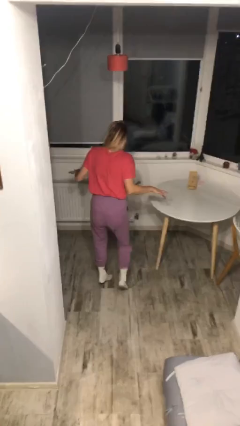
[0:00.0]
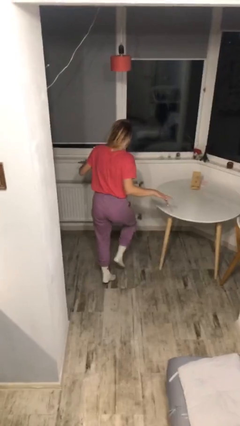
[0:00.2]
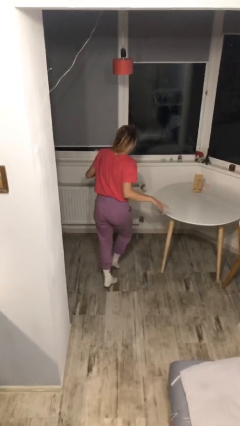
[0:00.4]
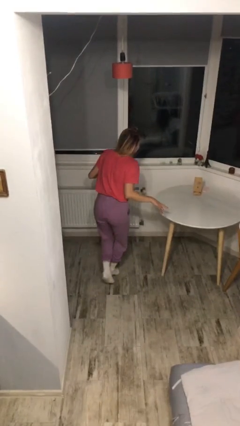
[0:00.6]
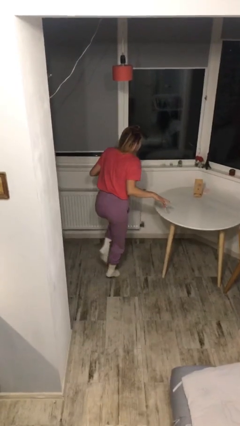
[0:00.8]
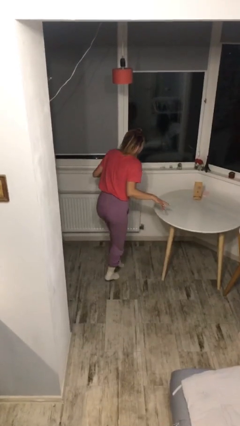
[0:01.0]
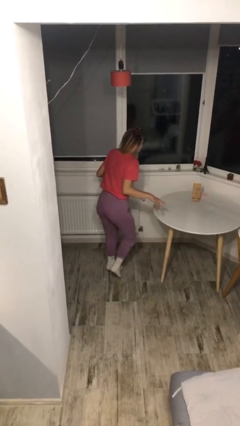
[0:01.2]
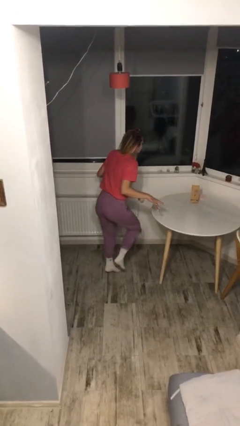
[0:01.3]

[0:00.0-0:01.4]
person walks tiptoe

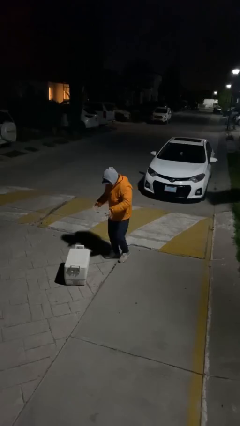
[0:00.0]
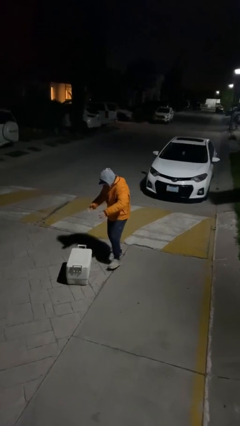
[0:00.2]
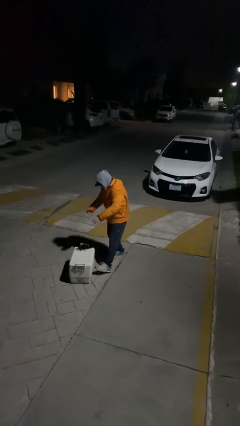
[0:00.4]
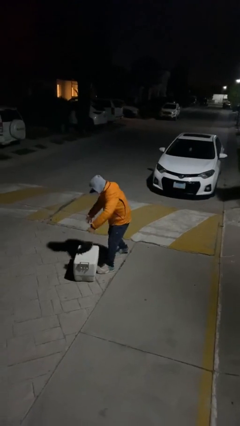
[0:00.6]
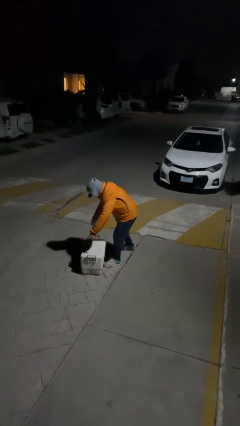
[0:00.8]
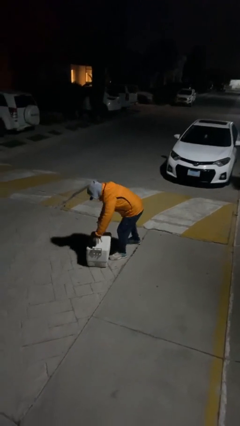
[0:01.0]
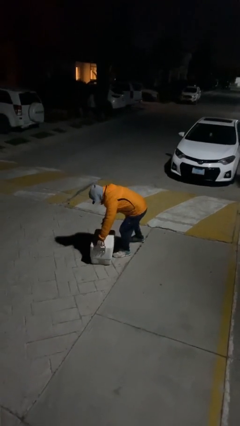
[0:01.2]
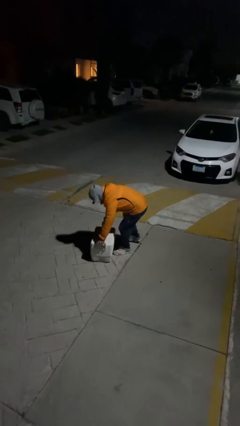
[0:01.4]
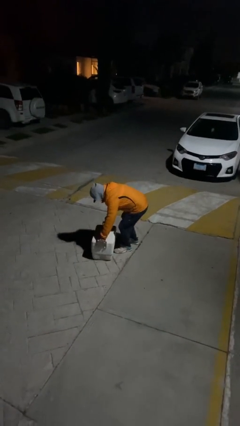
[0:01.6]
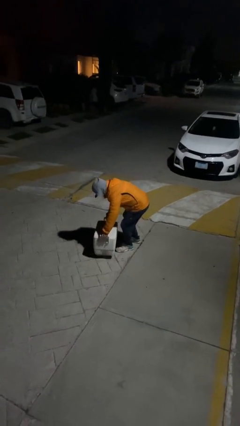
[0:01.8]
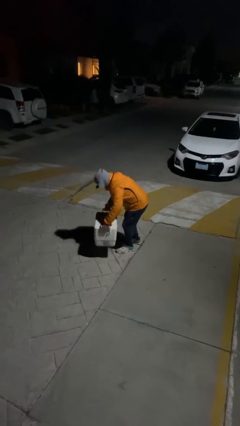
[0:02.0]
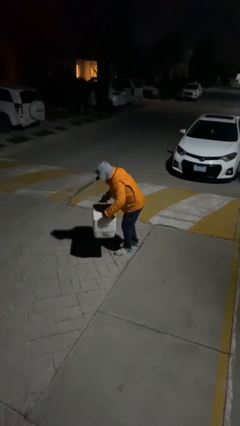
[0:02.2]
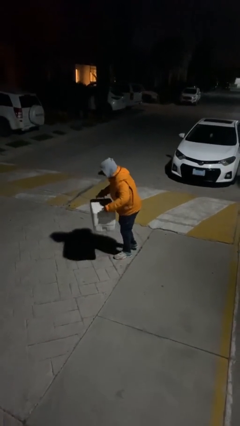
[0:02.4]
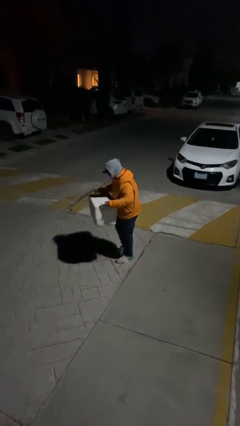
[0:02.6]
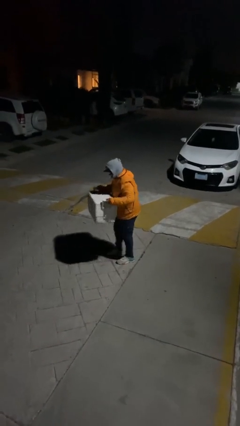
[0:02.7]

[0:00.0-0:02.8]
person picks up object from floor

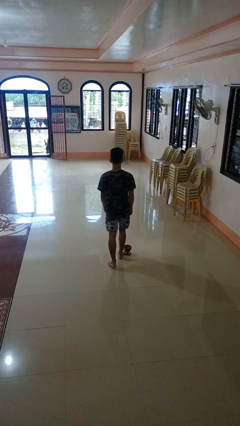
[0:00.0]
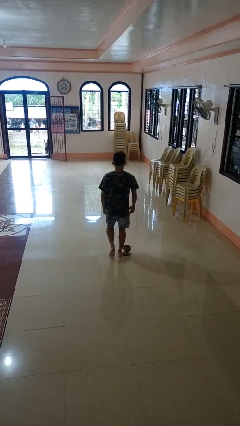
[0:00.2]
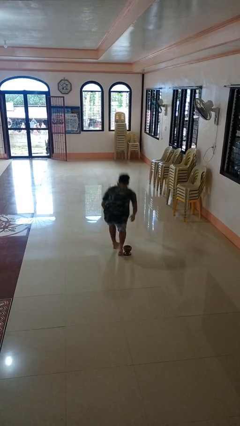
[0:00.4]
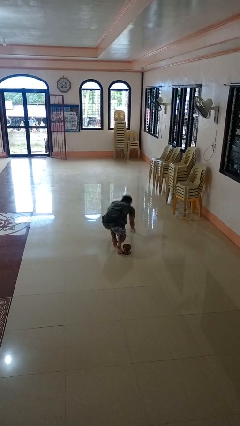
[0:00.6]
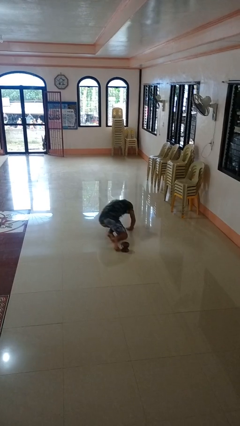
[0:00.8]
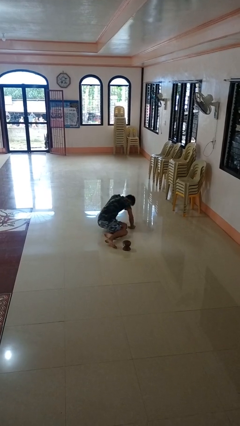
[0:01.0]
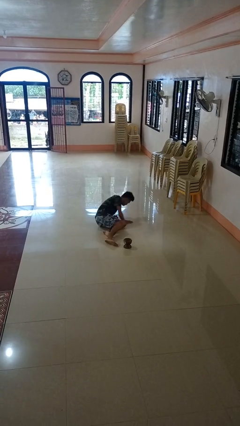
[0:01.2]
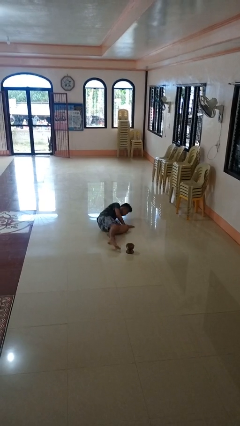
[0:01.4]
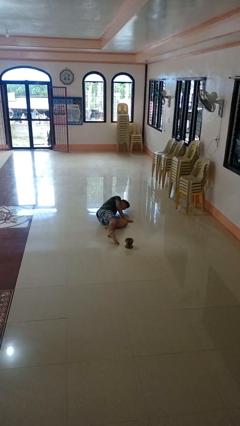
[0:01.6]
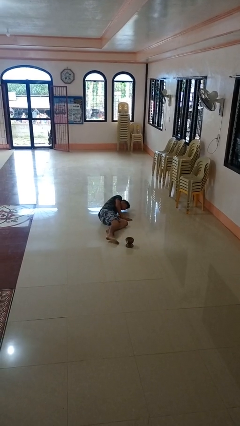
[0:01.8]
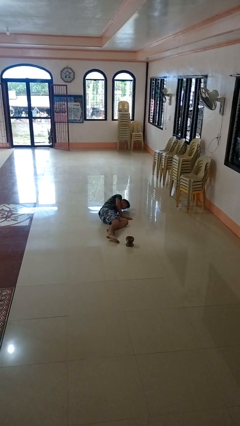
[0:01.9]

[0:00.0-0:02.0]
person trips on object on floor

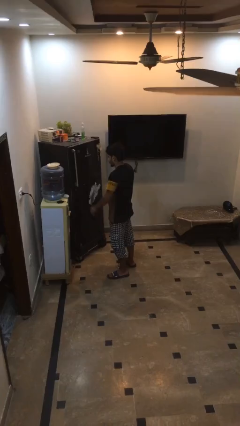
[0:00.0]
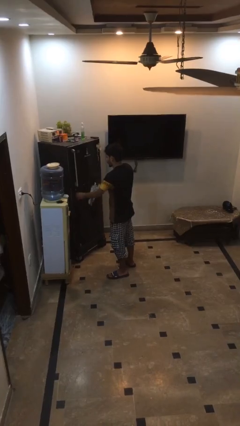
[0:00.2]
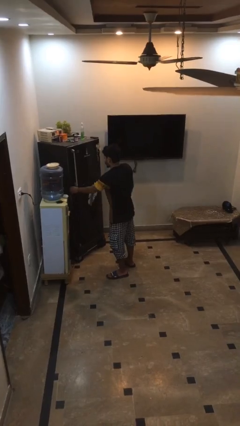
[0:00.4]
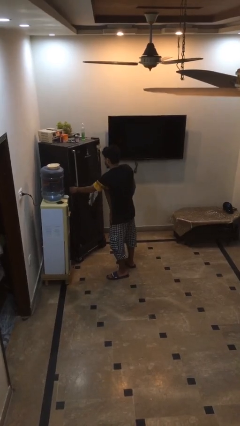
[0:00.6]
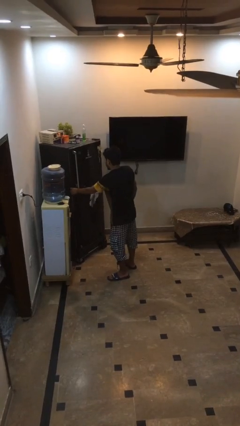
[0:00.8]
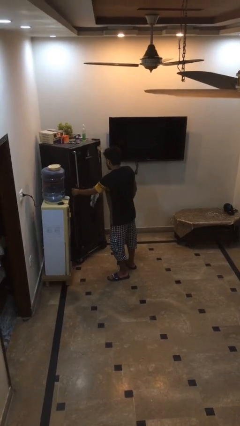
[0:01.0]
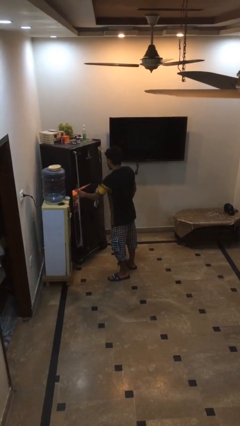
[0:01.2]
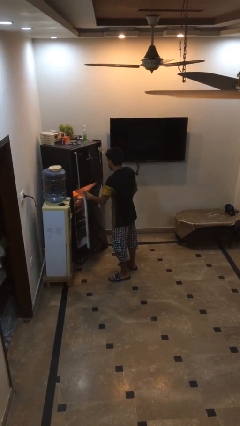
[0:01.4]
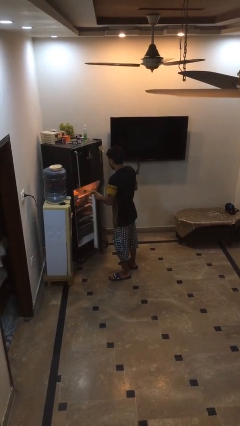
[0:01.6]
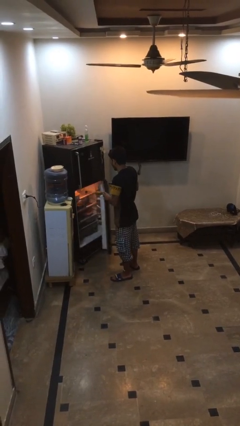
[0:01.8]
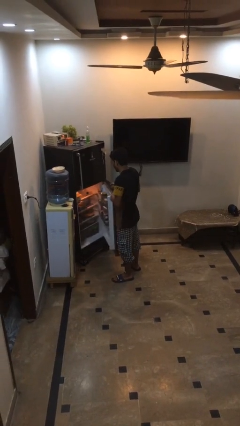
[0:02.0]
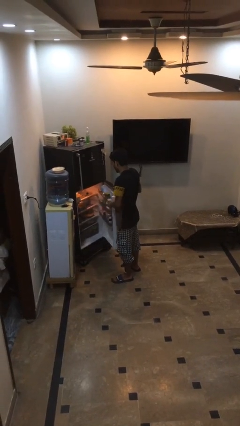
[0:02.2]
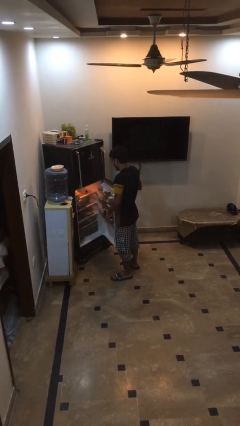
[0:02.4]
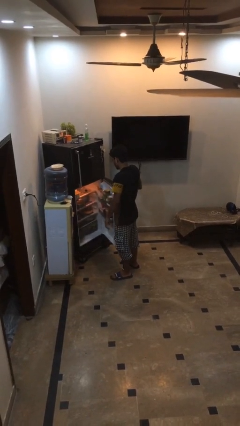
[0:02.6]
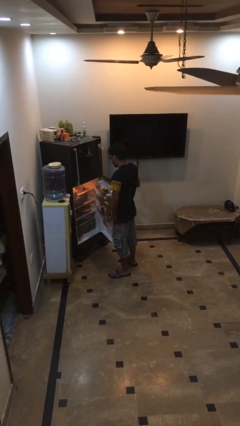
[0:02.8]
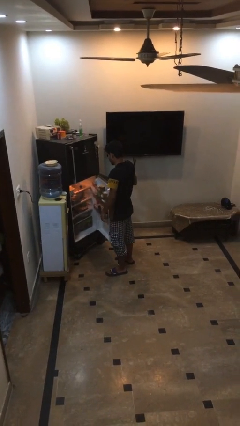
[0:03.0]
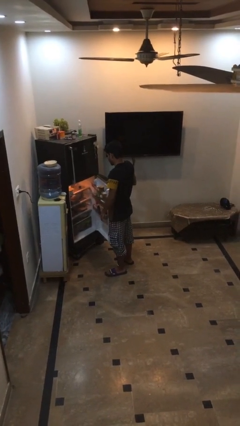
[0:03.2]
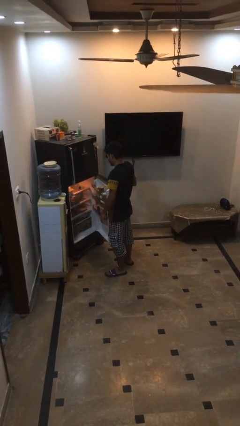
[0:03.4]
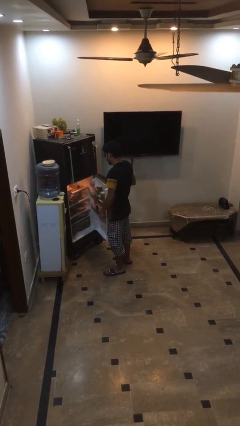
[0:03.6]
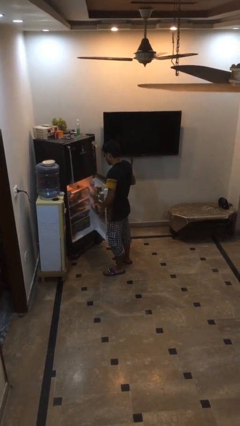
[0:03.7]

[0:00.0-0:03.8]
person opens refrigerator

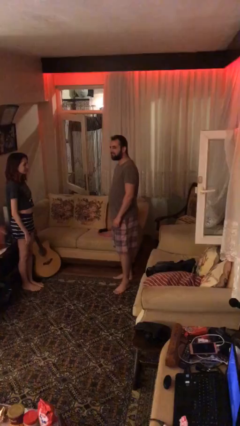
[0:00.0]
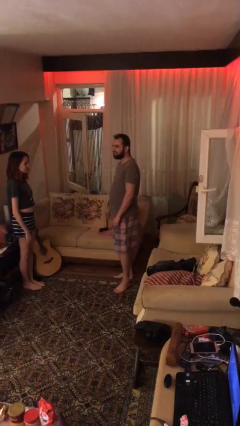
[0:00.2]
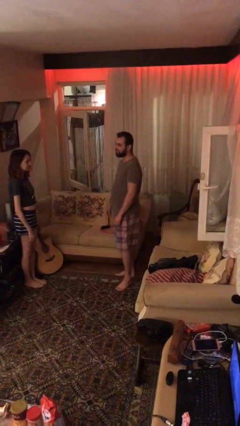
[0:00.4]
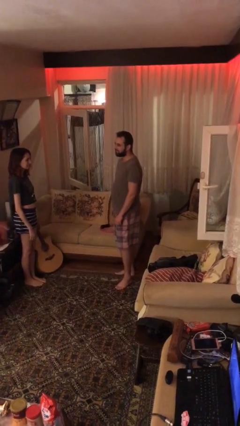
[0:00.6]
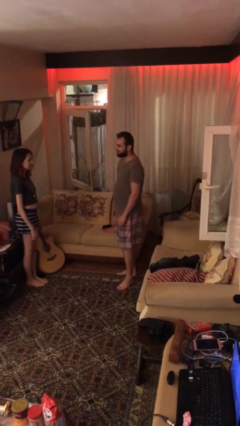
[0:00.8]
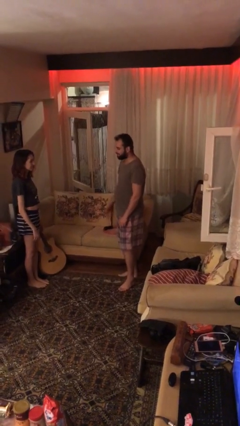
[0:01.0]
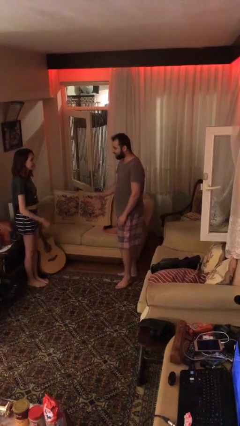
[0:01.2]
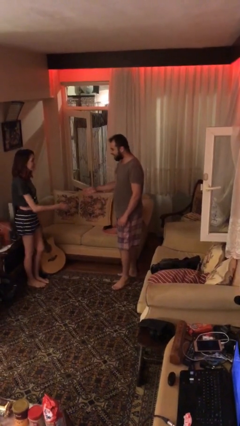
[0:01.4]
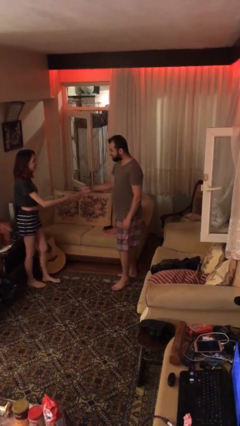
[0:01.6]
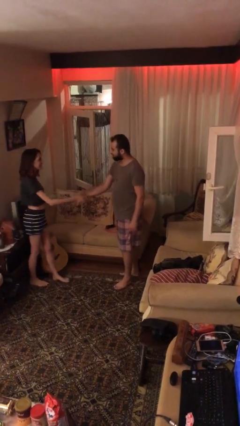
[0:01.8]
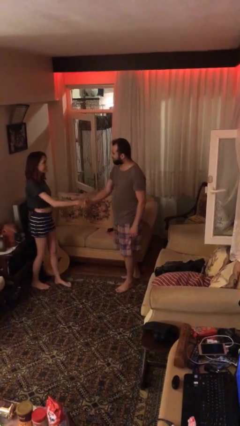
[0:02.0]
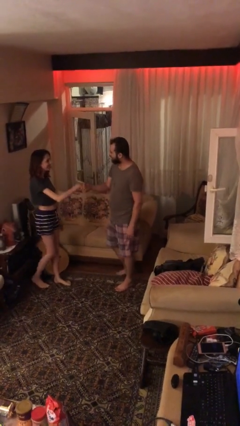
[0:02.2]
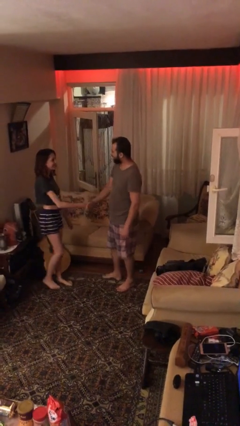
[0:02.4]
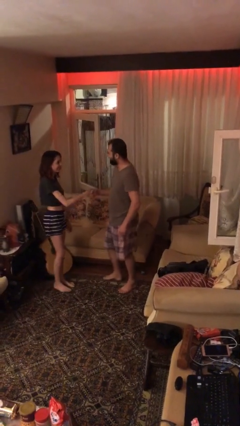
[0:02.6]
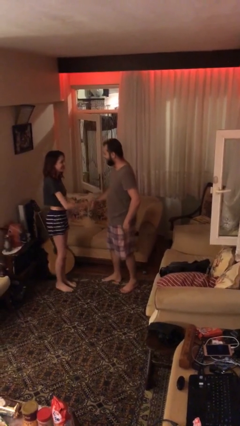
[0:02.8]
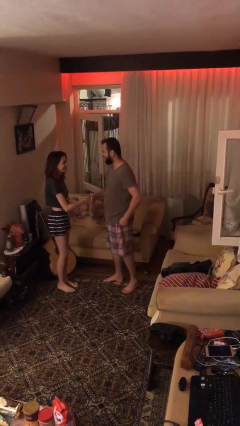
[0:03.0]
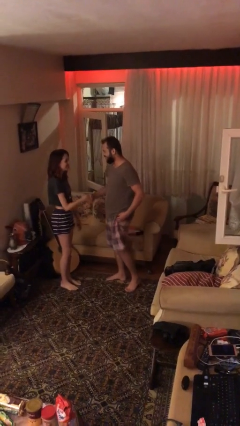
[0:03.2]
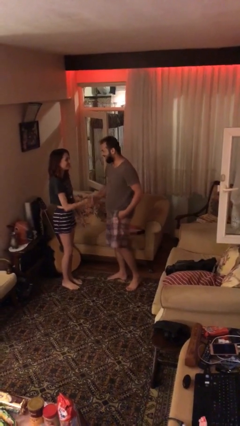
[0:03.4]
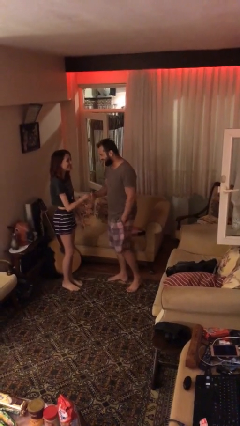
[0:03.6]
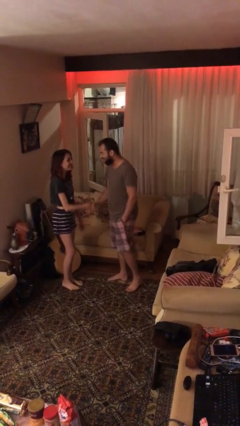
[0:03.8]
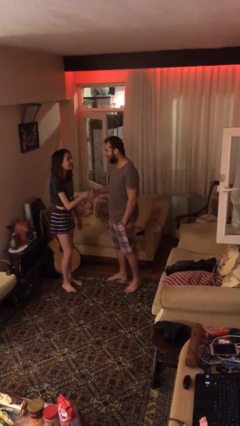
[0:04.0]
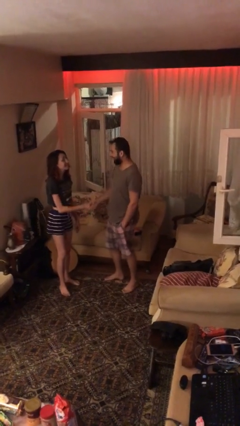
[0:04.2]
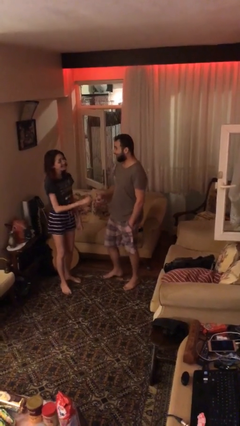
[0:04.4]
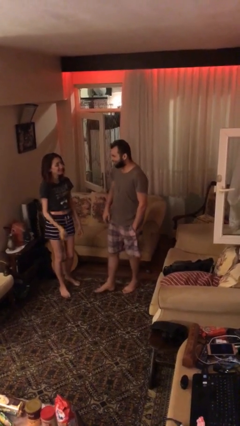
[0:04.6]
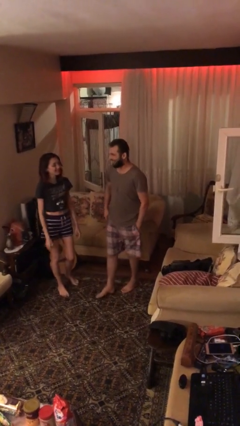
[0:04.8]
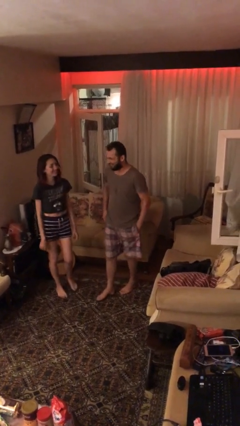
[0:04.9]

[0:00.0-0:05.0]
person shakes hand

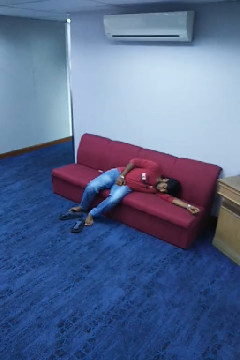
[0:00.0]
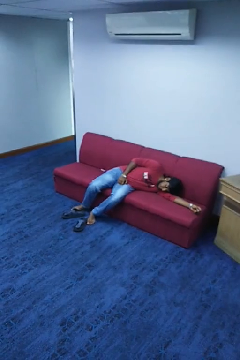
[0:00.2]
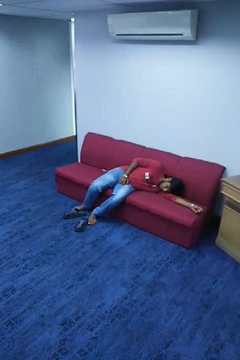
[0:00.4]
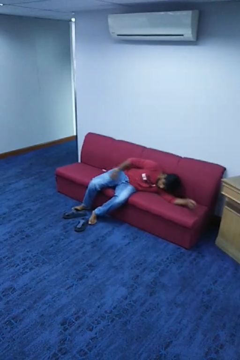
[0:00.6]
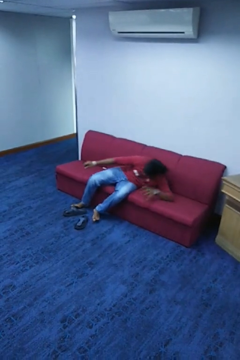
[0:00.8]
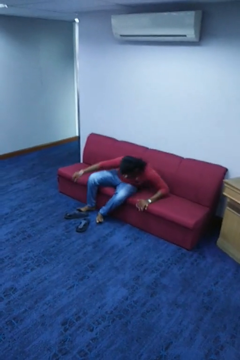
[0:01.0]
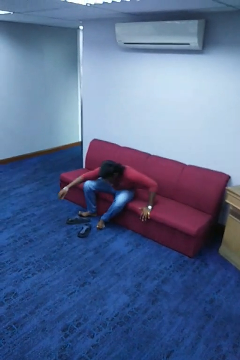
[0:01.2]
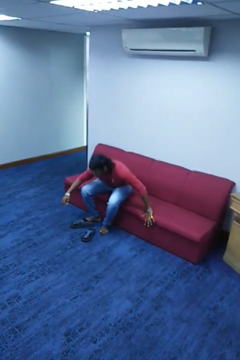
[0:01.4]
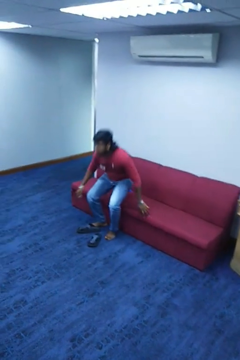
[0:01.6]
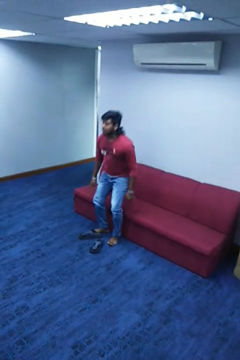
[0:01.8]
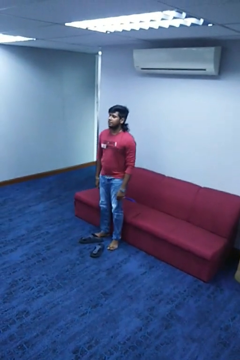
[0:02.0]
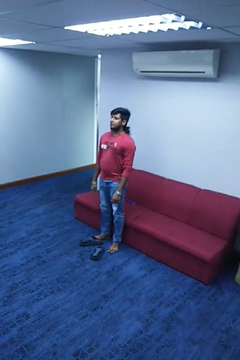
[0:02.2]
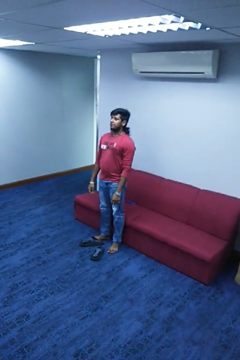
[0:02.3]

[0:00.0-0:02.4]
person stands up
